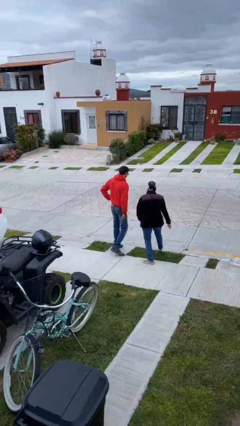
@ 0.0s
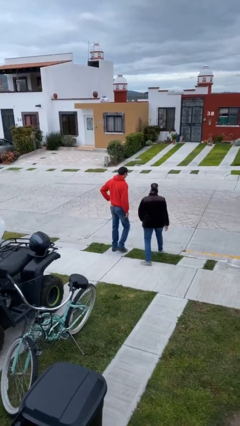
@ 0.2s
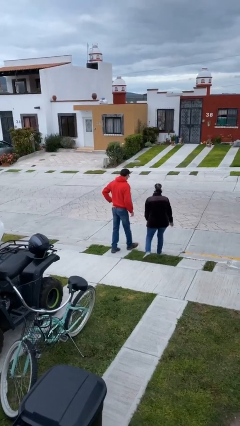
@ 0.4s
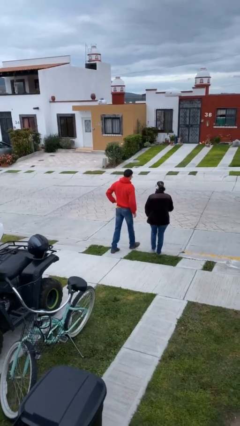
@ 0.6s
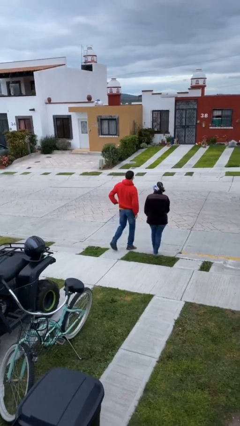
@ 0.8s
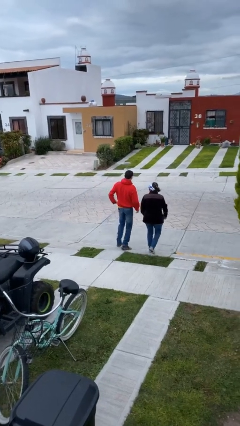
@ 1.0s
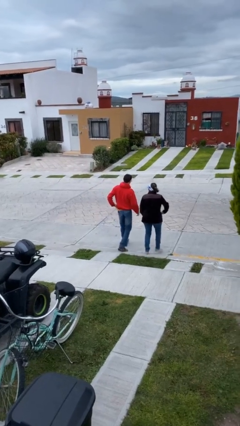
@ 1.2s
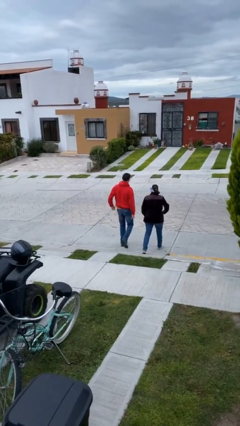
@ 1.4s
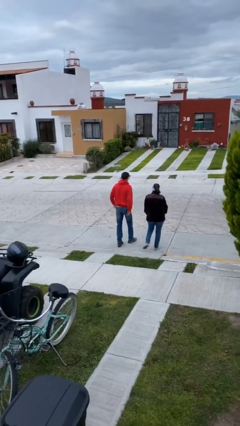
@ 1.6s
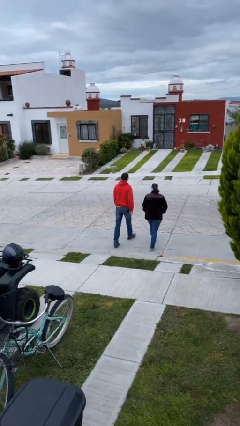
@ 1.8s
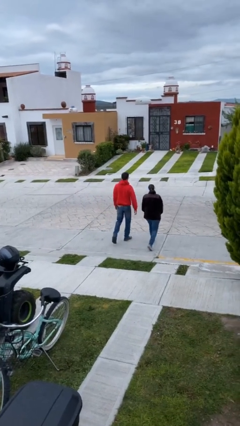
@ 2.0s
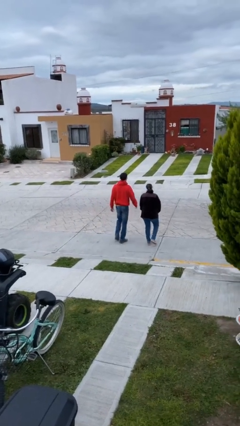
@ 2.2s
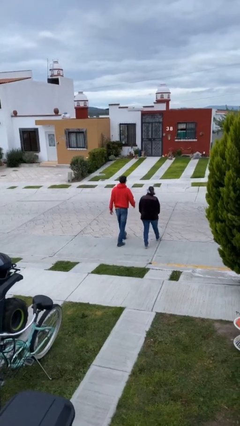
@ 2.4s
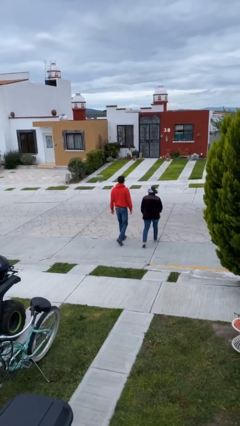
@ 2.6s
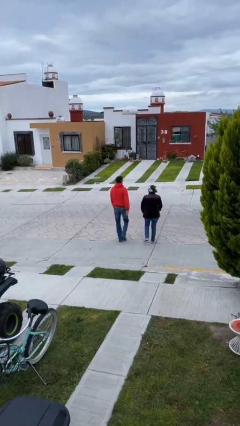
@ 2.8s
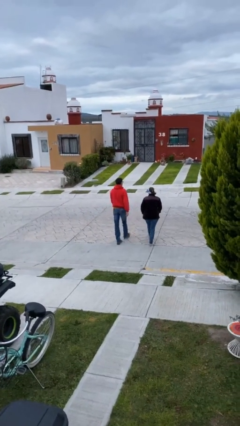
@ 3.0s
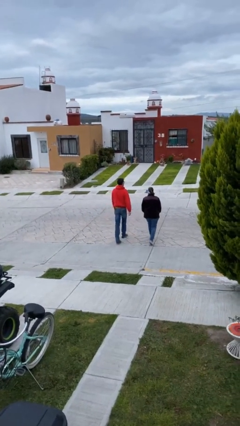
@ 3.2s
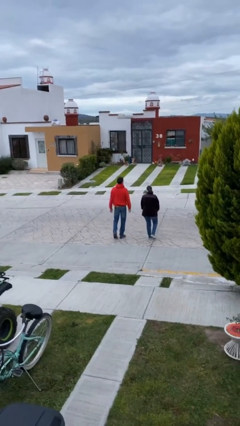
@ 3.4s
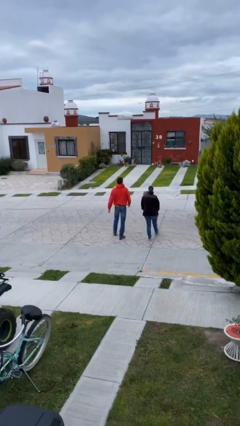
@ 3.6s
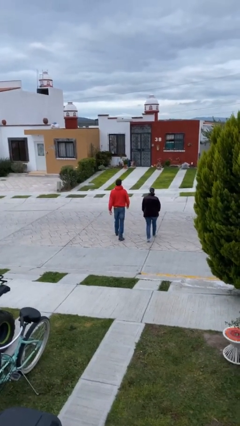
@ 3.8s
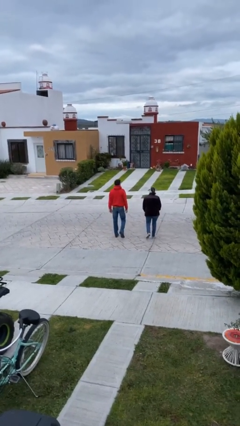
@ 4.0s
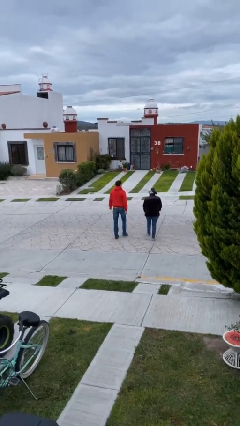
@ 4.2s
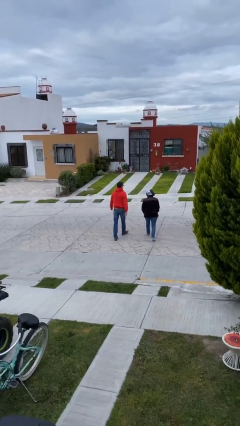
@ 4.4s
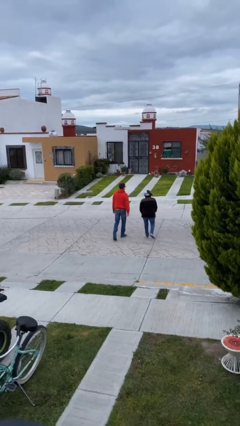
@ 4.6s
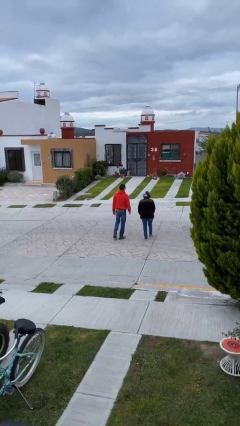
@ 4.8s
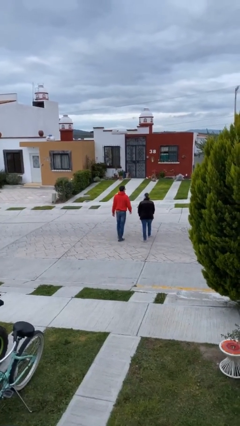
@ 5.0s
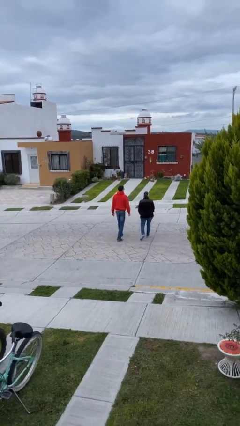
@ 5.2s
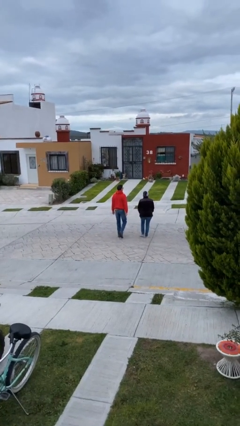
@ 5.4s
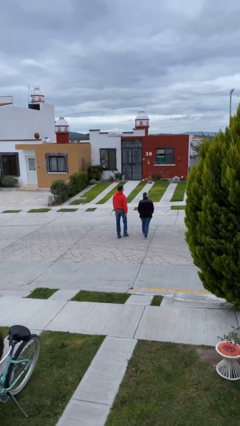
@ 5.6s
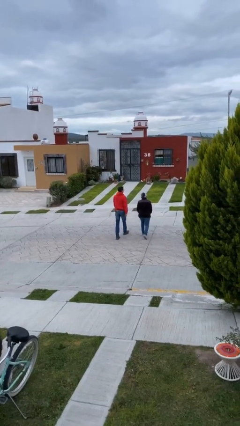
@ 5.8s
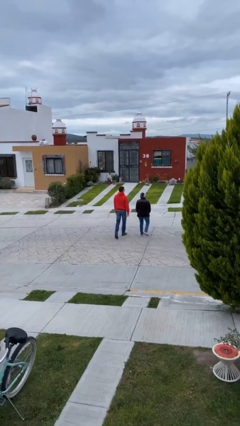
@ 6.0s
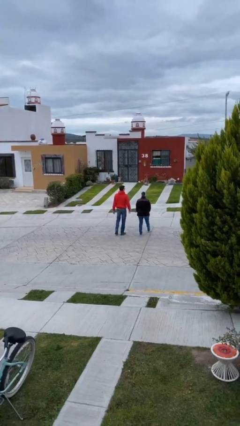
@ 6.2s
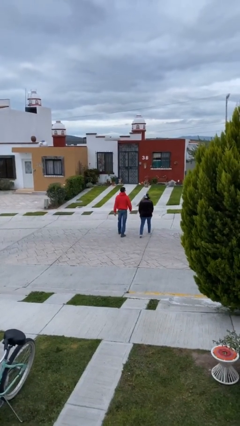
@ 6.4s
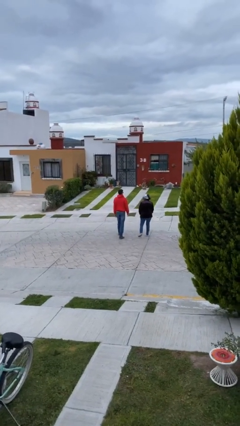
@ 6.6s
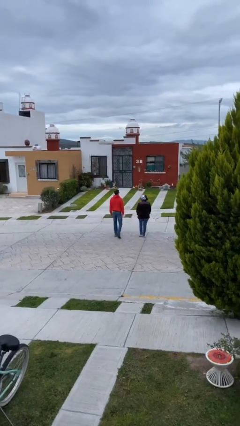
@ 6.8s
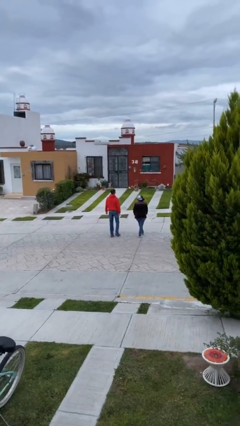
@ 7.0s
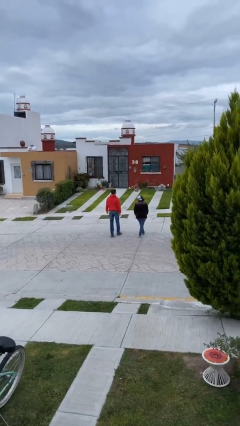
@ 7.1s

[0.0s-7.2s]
person talks to person

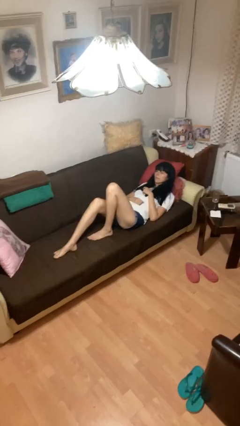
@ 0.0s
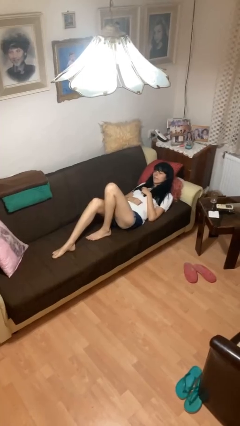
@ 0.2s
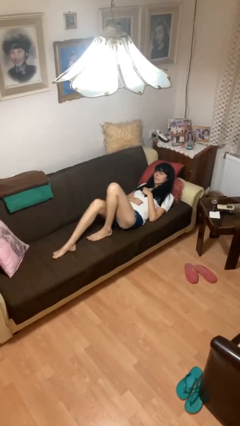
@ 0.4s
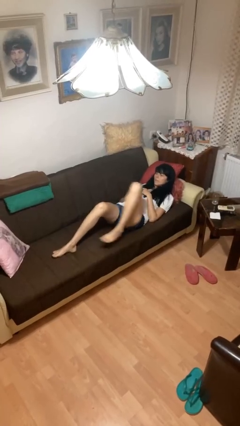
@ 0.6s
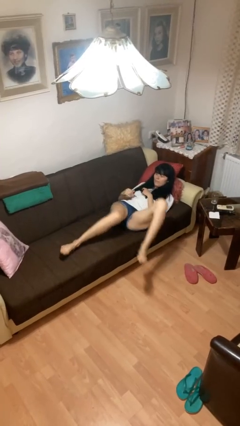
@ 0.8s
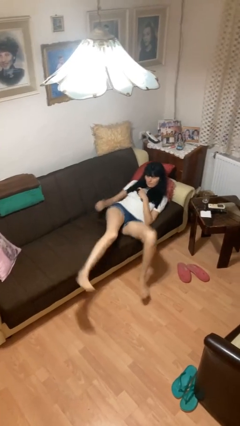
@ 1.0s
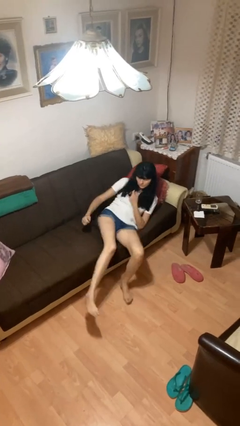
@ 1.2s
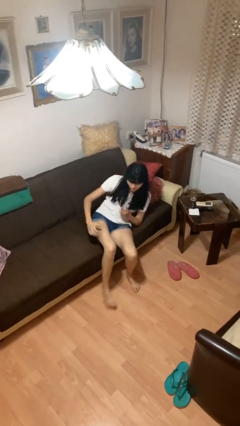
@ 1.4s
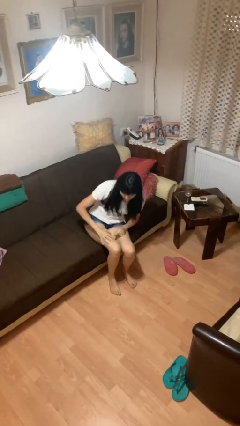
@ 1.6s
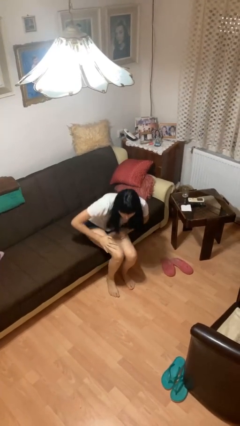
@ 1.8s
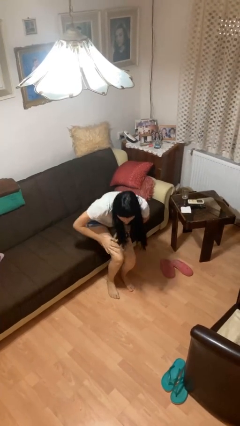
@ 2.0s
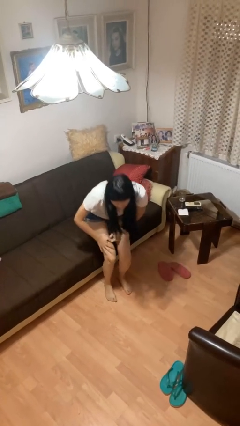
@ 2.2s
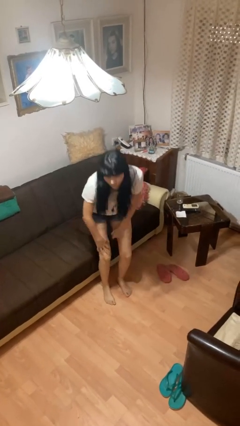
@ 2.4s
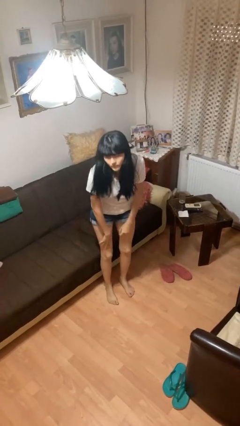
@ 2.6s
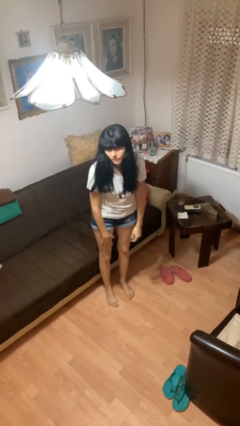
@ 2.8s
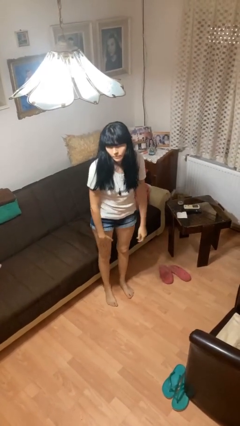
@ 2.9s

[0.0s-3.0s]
person stands up

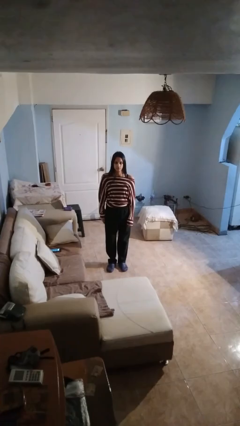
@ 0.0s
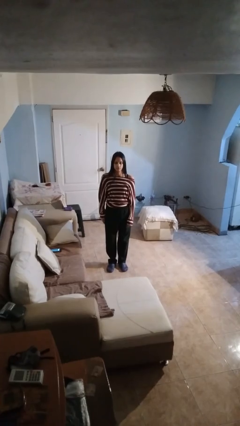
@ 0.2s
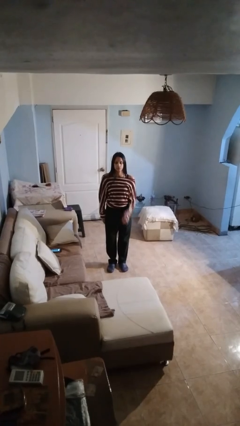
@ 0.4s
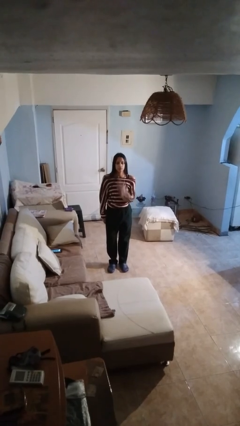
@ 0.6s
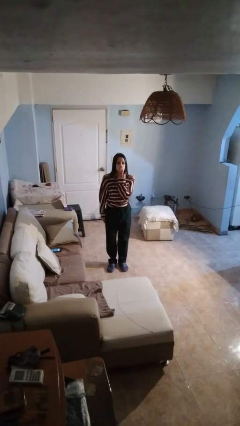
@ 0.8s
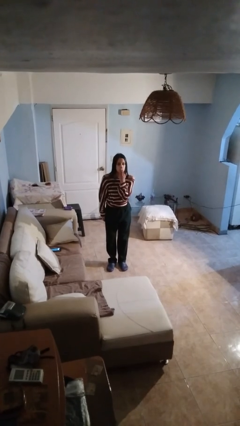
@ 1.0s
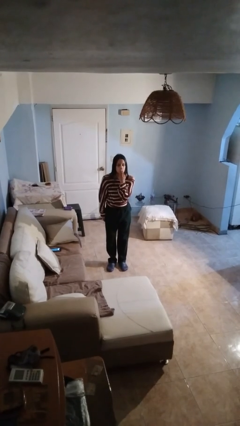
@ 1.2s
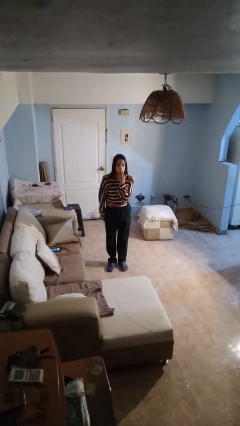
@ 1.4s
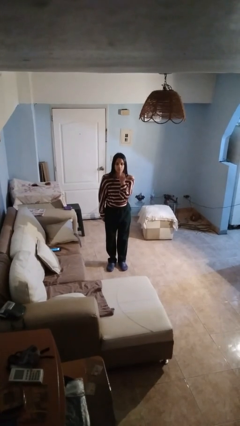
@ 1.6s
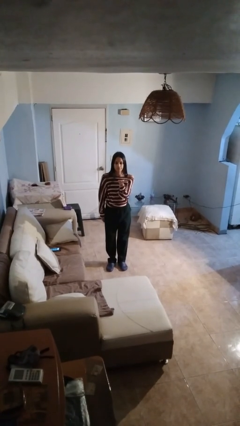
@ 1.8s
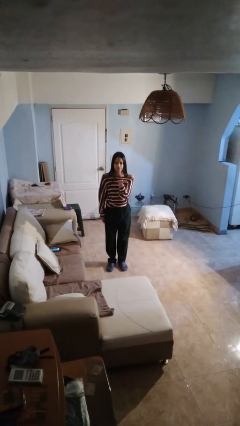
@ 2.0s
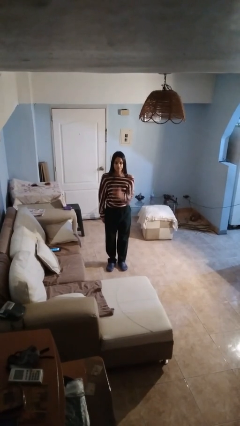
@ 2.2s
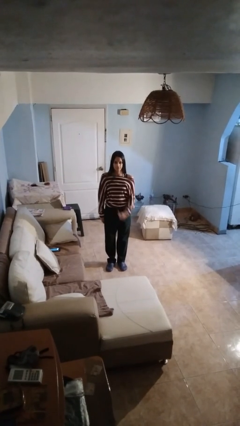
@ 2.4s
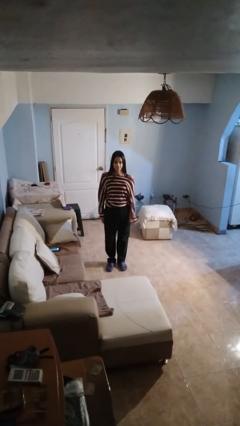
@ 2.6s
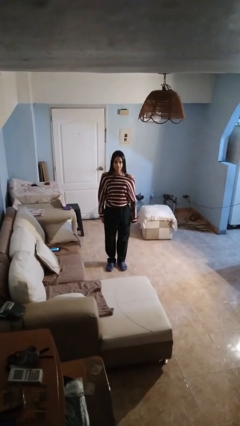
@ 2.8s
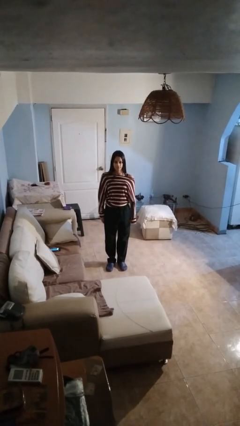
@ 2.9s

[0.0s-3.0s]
person gestures blow kiss

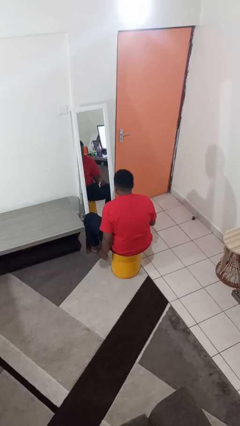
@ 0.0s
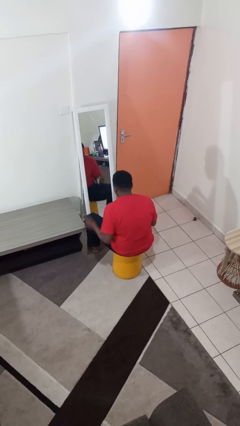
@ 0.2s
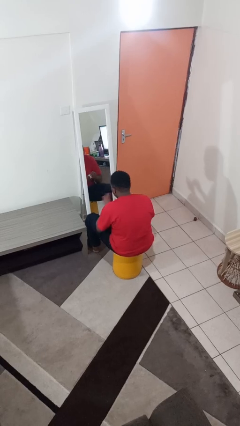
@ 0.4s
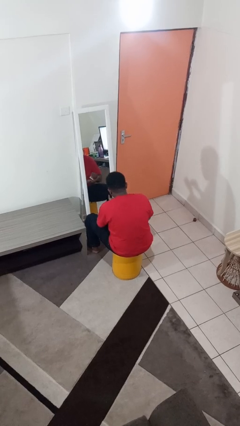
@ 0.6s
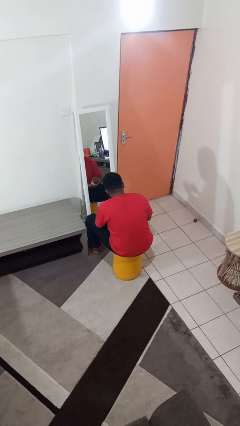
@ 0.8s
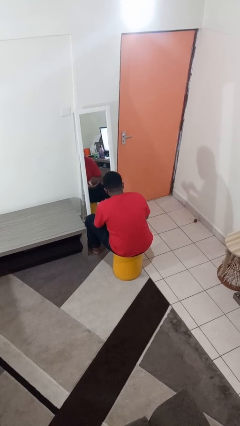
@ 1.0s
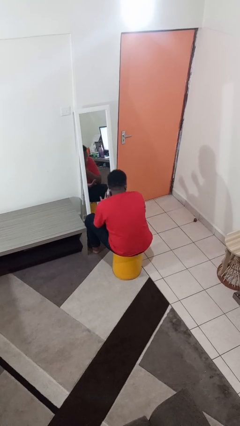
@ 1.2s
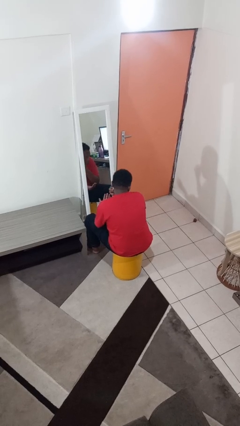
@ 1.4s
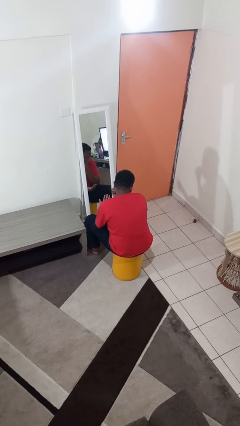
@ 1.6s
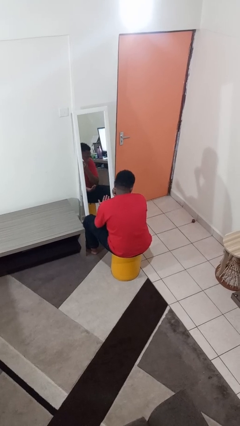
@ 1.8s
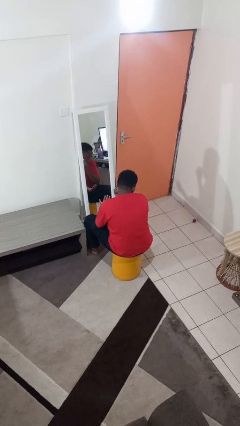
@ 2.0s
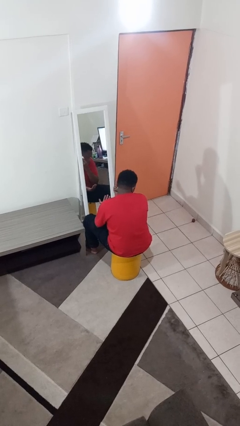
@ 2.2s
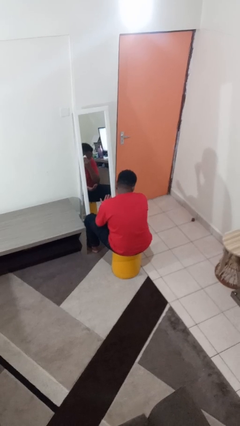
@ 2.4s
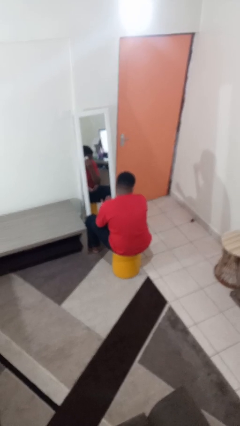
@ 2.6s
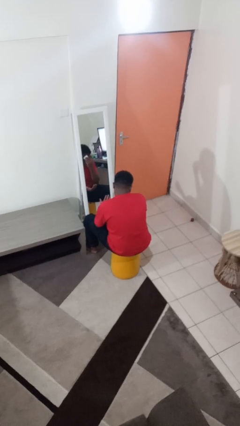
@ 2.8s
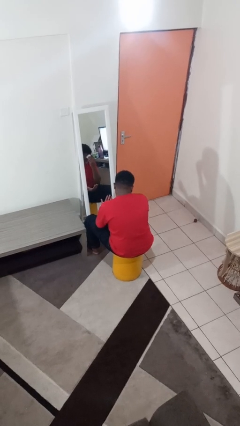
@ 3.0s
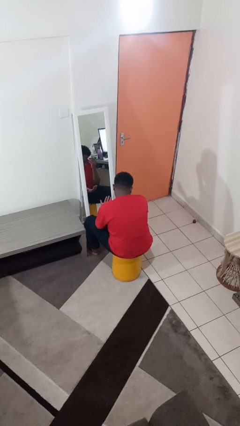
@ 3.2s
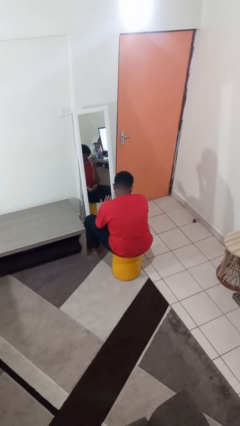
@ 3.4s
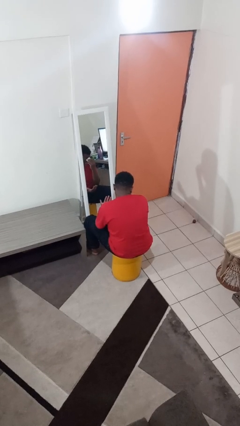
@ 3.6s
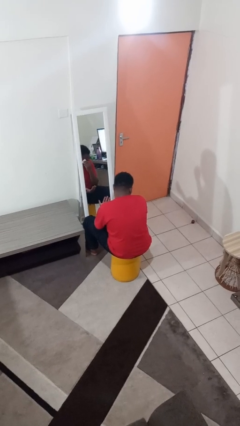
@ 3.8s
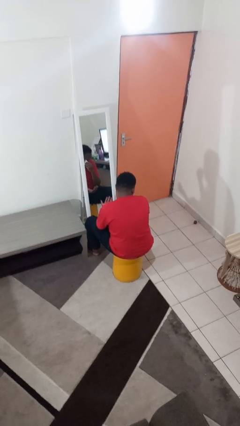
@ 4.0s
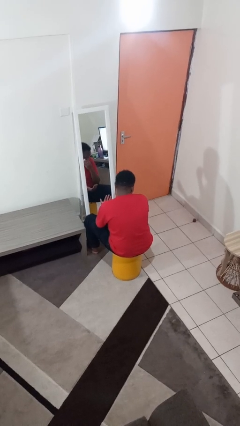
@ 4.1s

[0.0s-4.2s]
person applies foundation makeup

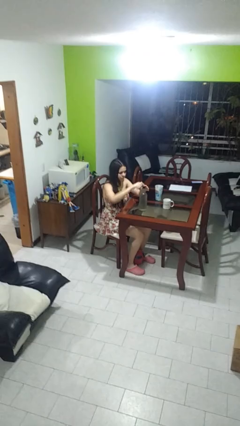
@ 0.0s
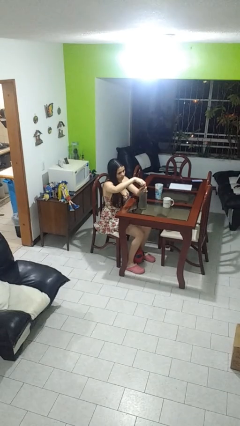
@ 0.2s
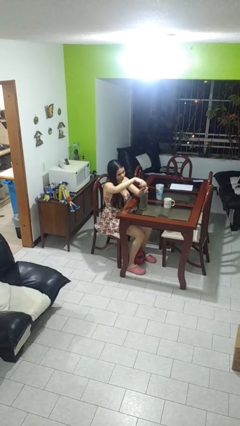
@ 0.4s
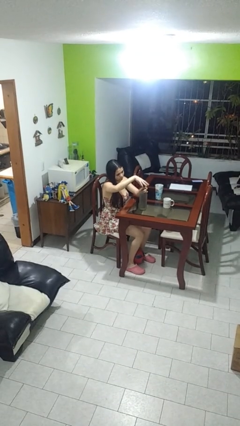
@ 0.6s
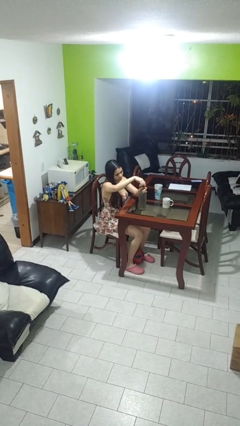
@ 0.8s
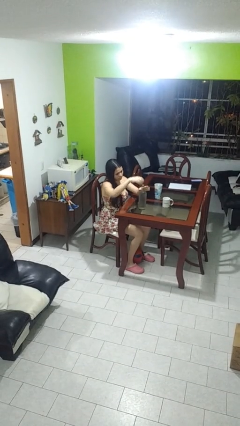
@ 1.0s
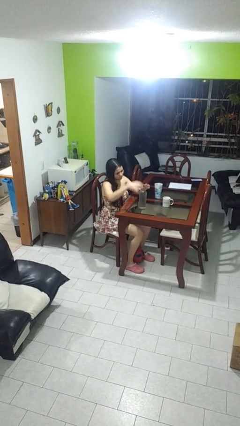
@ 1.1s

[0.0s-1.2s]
person unscrews lid from bottle
